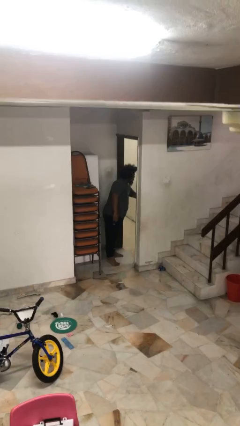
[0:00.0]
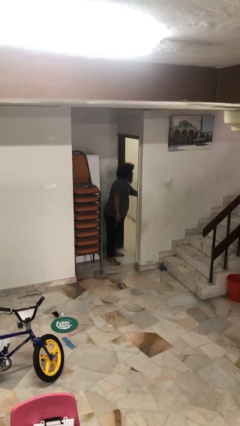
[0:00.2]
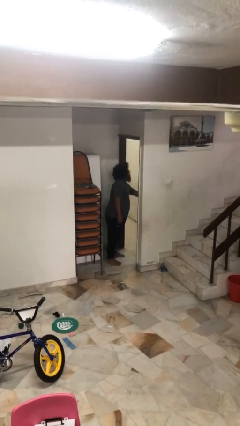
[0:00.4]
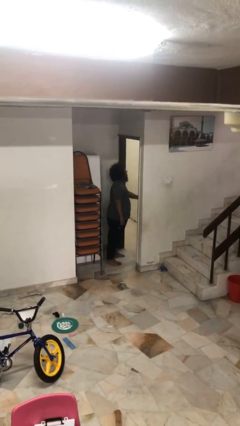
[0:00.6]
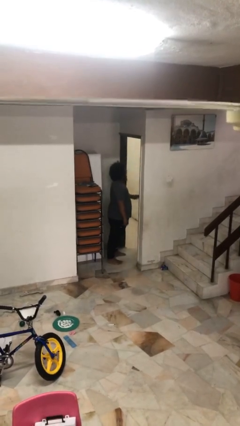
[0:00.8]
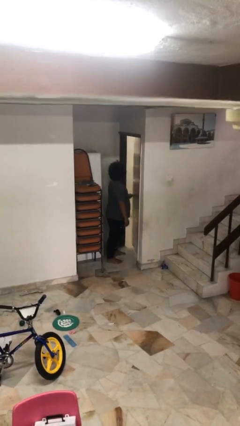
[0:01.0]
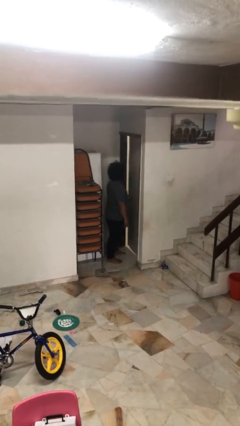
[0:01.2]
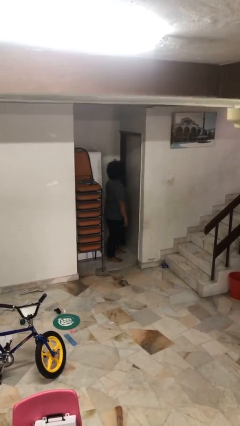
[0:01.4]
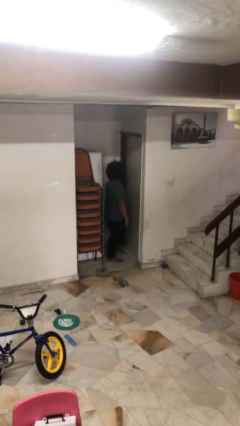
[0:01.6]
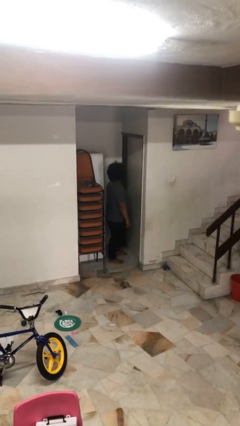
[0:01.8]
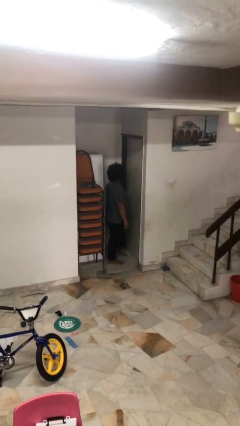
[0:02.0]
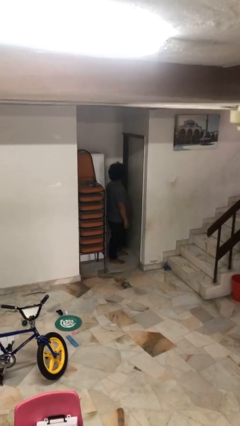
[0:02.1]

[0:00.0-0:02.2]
person closes facility door

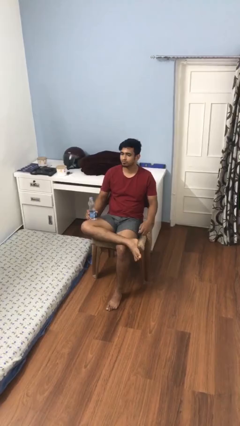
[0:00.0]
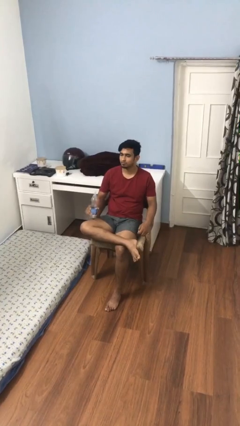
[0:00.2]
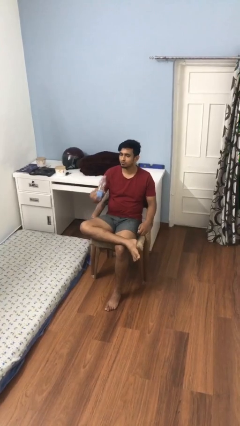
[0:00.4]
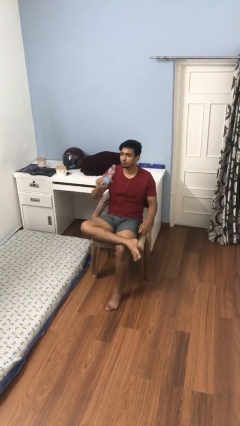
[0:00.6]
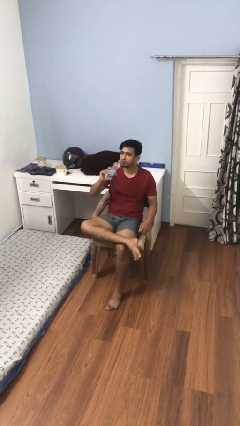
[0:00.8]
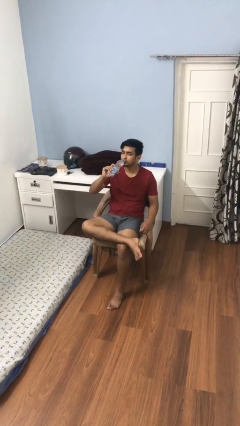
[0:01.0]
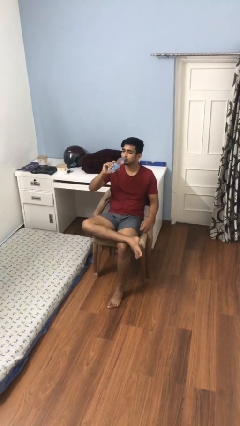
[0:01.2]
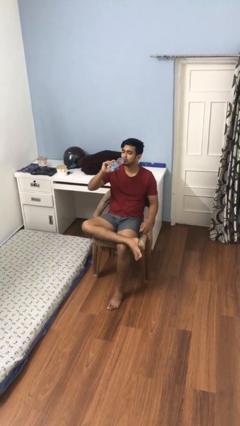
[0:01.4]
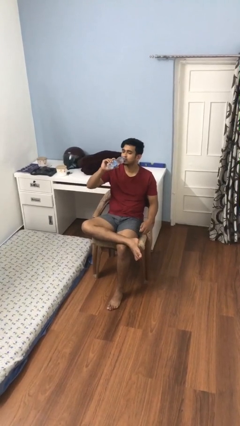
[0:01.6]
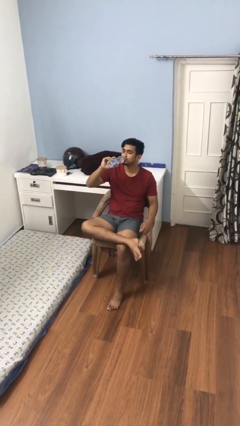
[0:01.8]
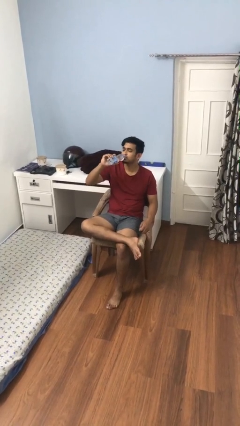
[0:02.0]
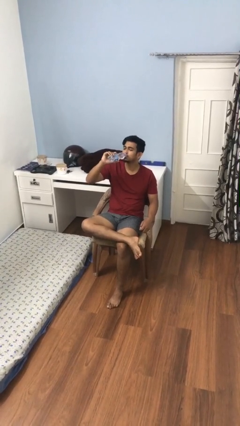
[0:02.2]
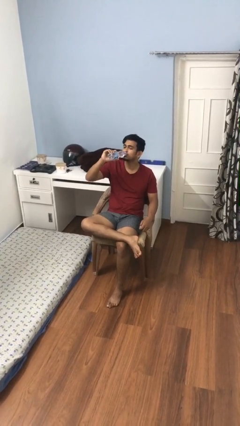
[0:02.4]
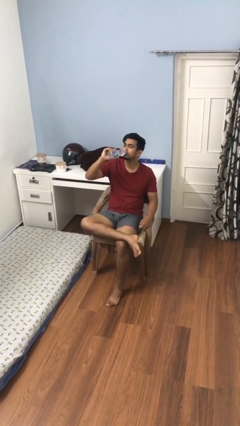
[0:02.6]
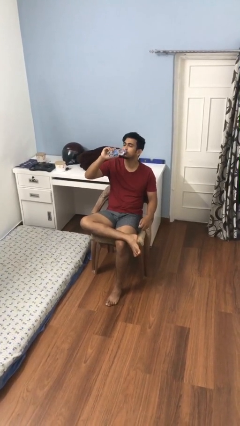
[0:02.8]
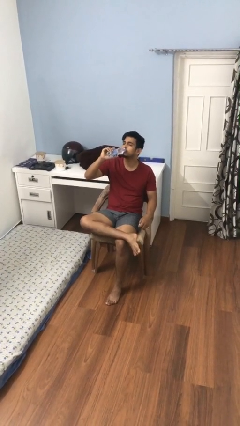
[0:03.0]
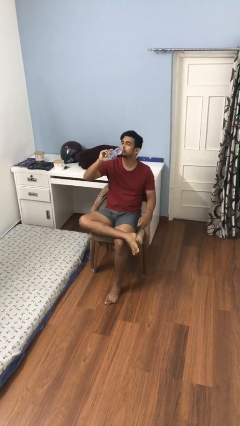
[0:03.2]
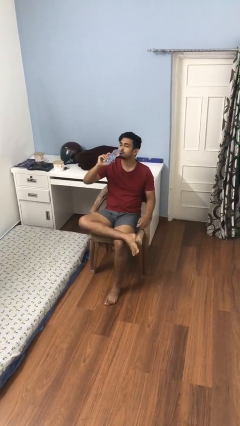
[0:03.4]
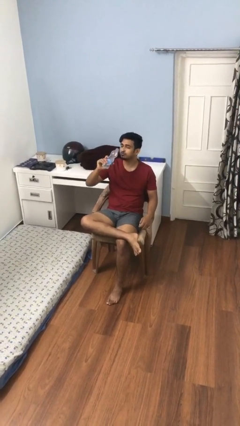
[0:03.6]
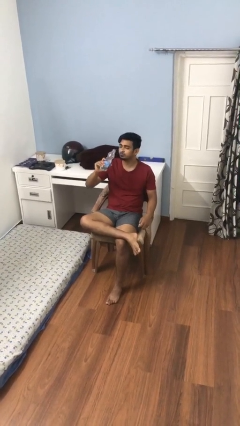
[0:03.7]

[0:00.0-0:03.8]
person drinks from bottle

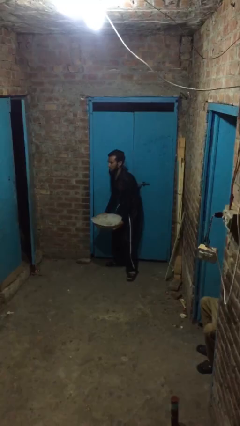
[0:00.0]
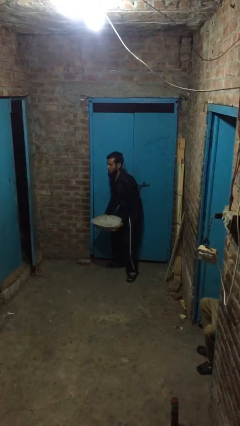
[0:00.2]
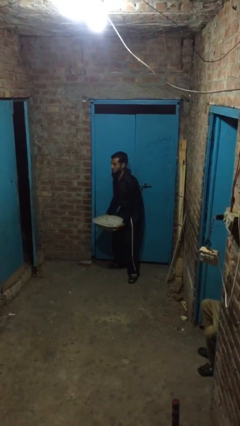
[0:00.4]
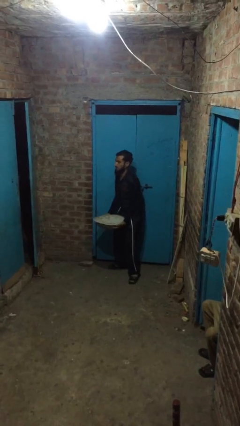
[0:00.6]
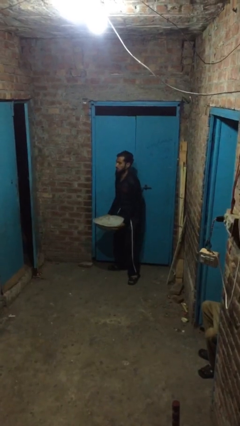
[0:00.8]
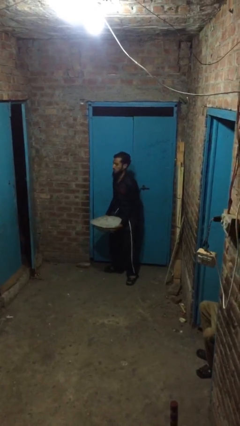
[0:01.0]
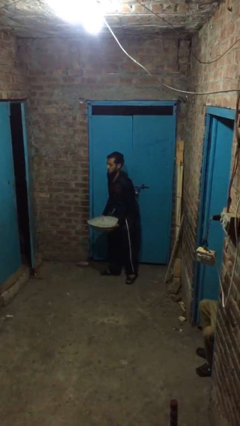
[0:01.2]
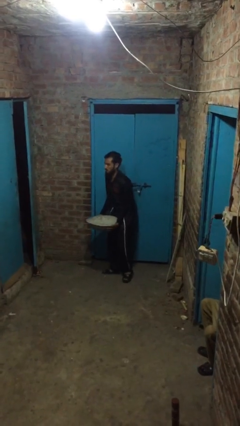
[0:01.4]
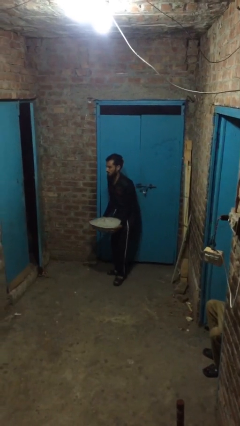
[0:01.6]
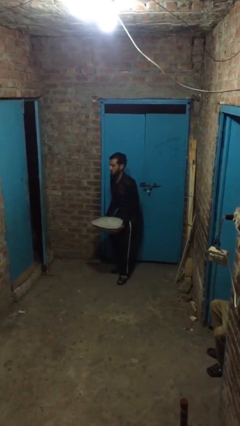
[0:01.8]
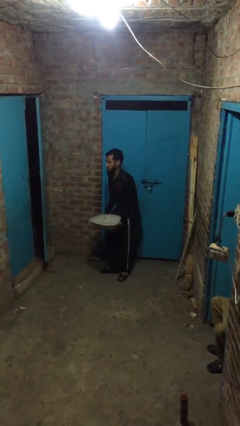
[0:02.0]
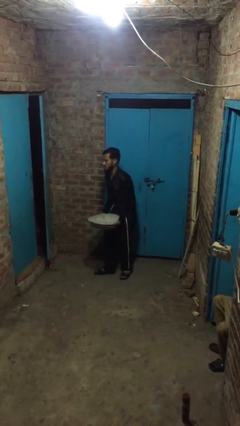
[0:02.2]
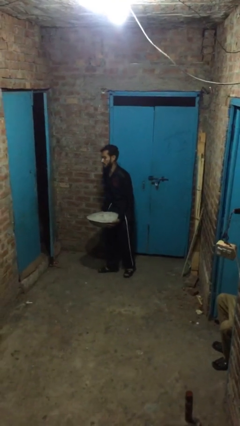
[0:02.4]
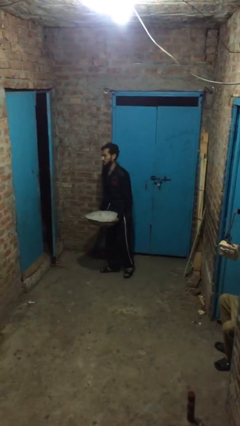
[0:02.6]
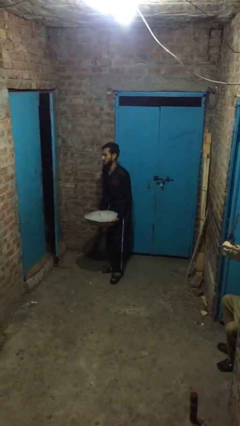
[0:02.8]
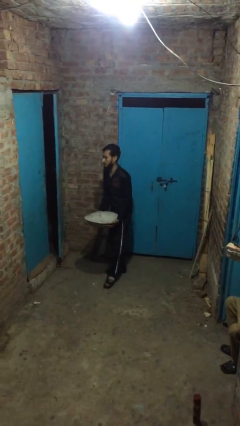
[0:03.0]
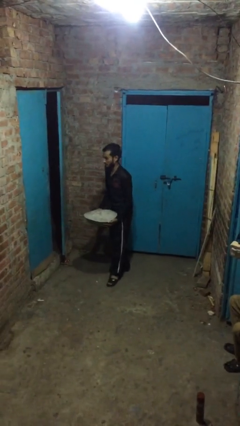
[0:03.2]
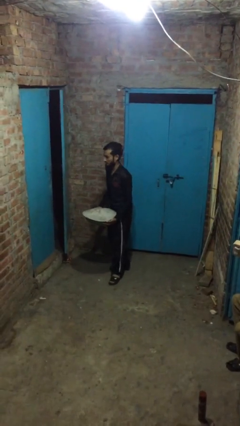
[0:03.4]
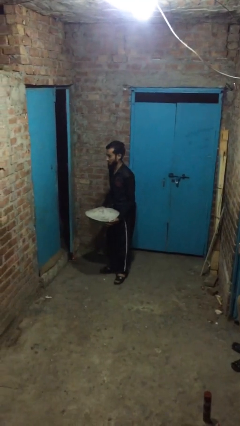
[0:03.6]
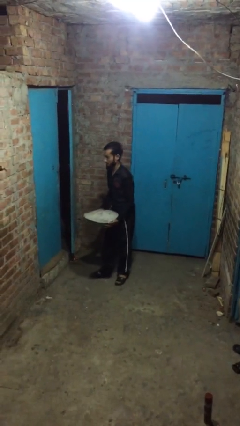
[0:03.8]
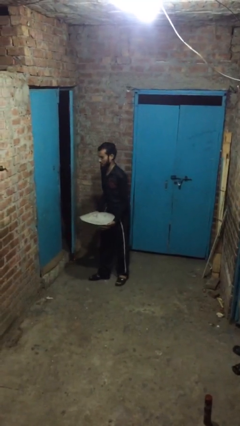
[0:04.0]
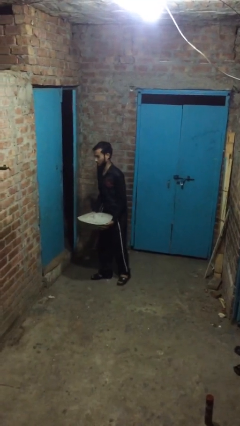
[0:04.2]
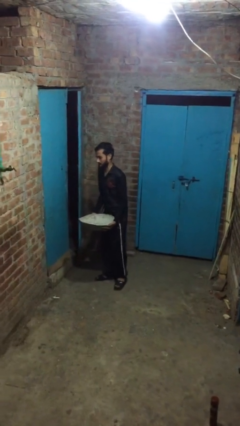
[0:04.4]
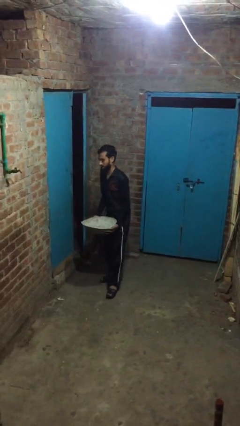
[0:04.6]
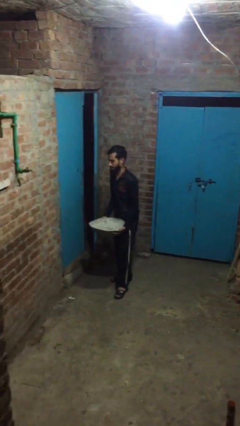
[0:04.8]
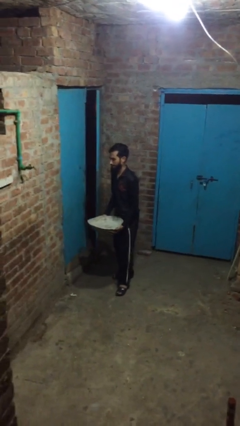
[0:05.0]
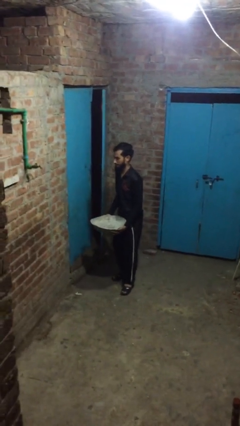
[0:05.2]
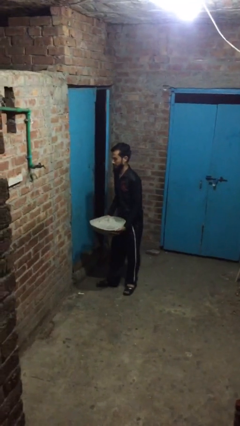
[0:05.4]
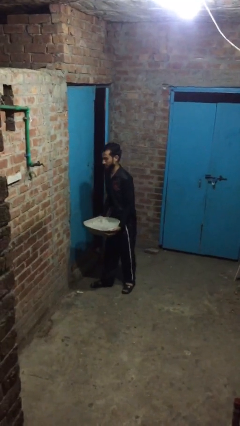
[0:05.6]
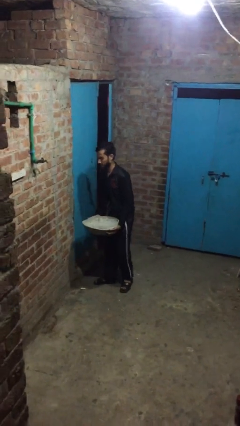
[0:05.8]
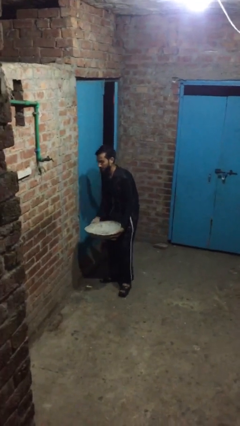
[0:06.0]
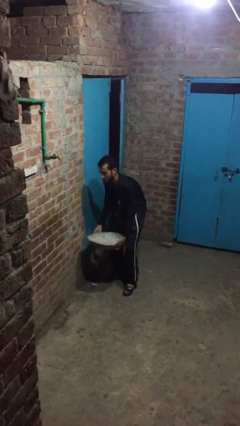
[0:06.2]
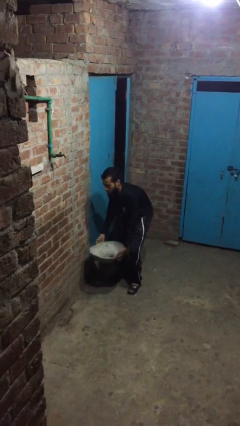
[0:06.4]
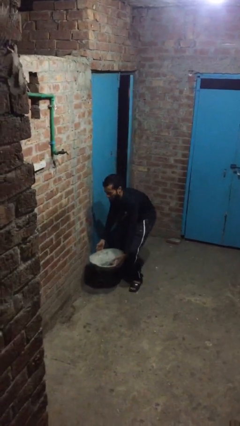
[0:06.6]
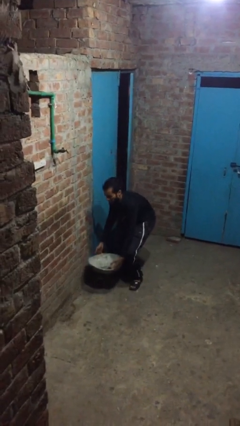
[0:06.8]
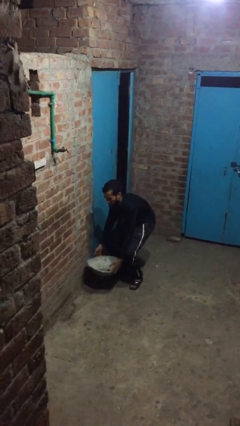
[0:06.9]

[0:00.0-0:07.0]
person carries heavy object

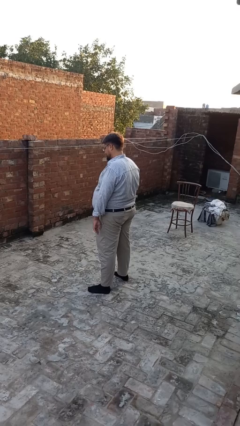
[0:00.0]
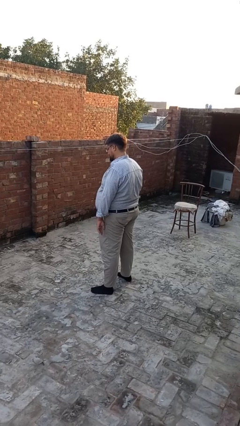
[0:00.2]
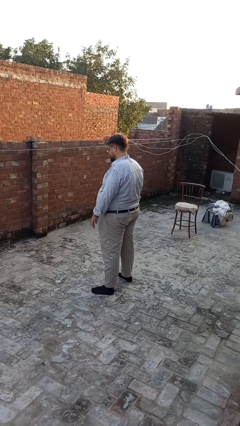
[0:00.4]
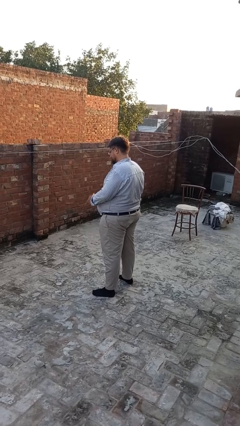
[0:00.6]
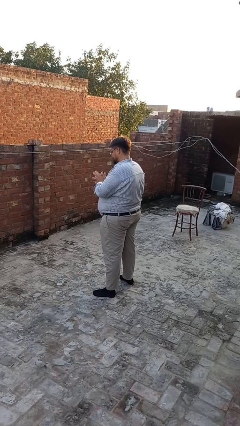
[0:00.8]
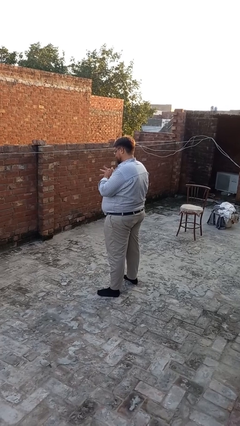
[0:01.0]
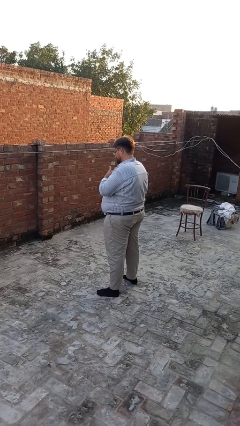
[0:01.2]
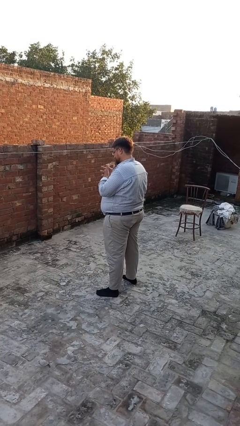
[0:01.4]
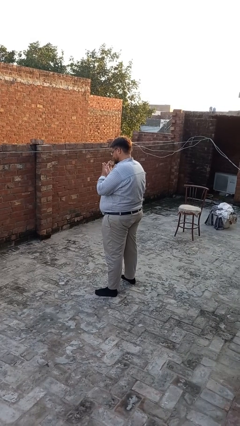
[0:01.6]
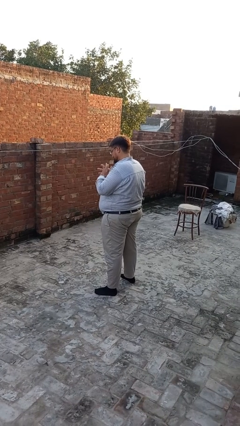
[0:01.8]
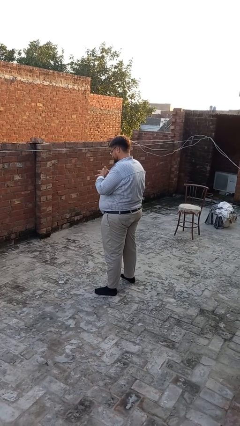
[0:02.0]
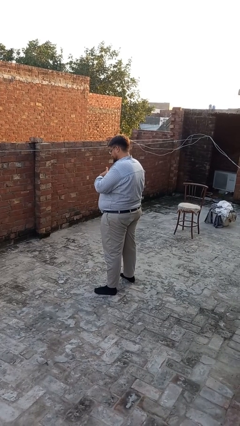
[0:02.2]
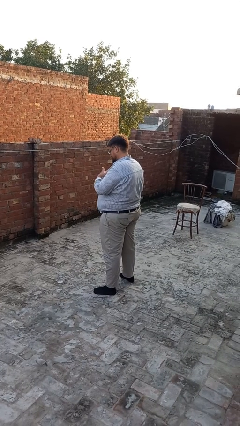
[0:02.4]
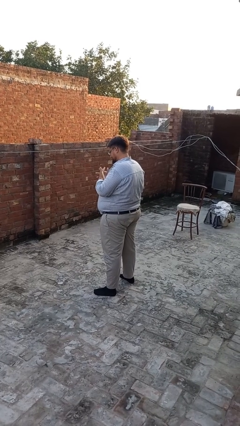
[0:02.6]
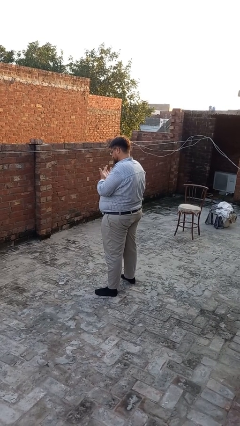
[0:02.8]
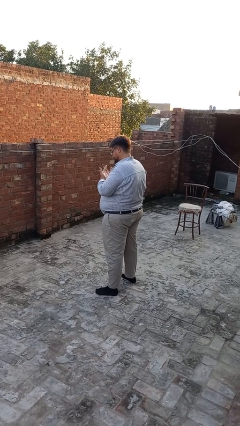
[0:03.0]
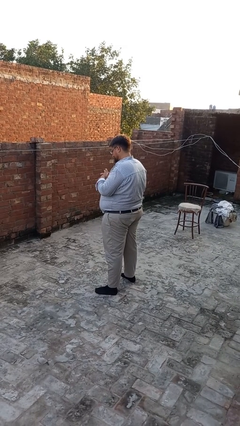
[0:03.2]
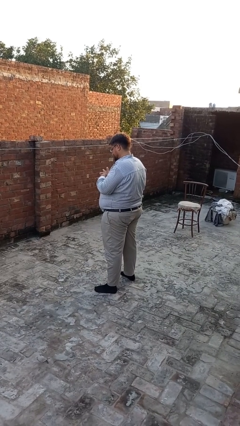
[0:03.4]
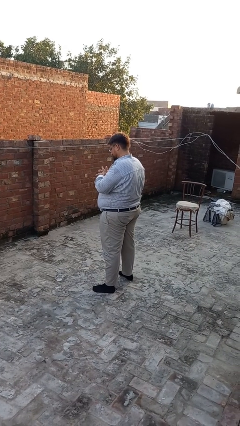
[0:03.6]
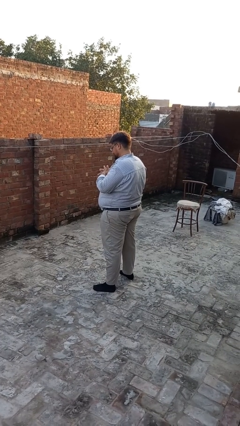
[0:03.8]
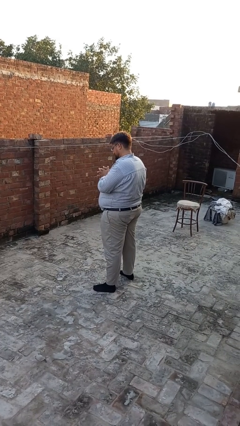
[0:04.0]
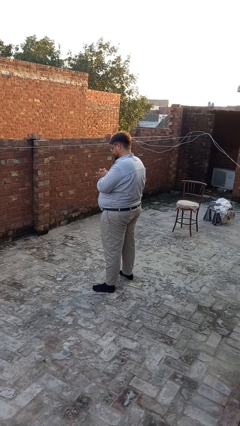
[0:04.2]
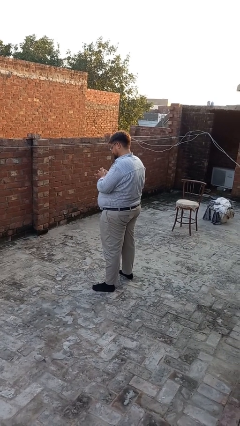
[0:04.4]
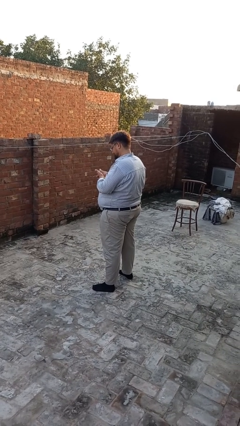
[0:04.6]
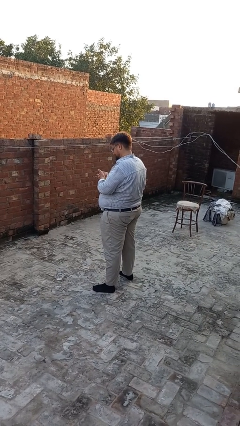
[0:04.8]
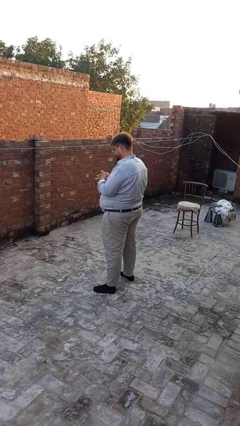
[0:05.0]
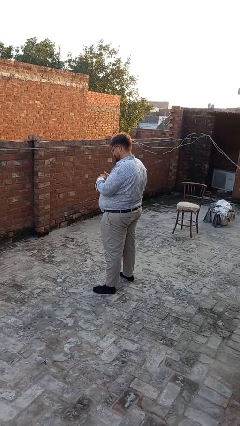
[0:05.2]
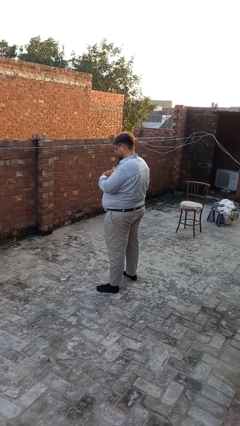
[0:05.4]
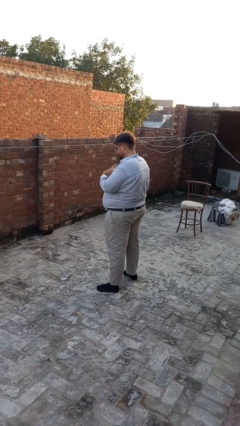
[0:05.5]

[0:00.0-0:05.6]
person cracks knuckles
